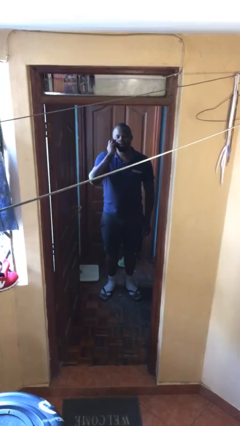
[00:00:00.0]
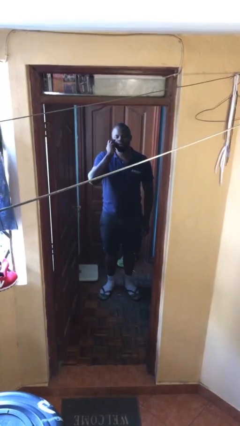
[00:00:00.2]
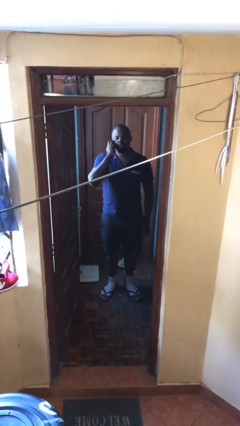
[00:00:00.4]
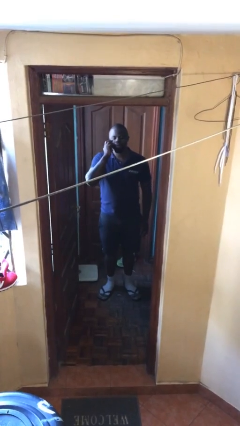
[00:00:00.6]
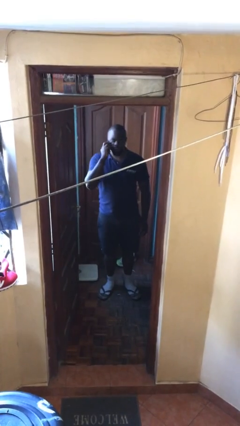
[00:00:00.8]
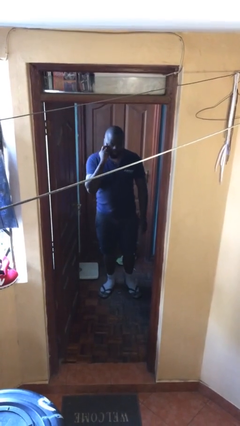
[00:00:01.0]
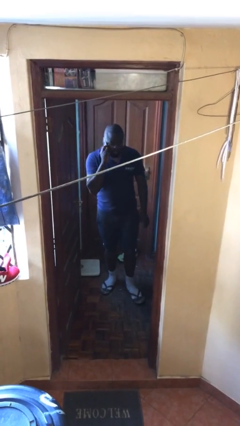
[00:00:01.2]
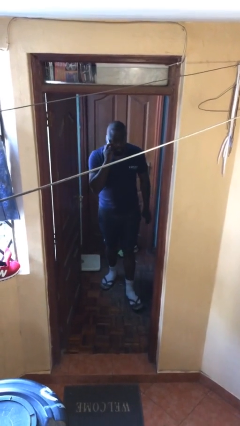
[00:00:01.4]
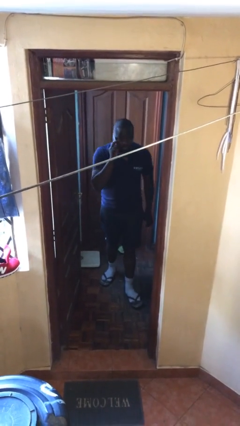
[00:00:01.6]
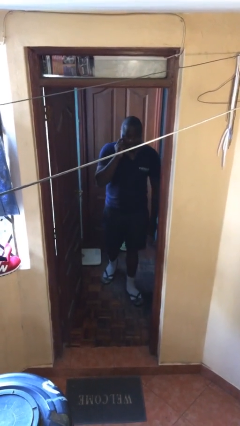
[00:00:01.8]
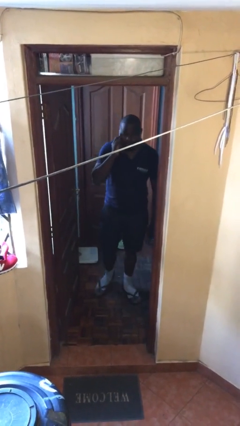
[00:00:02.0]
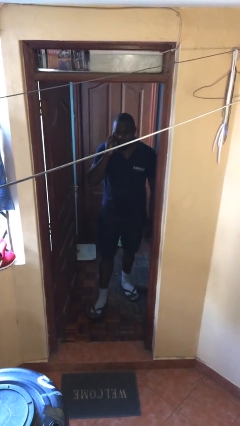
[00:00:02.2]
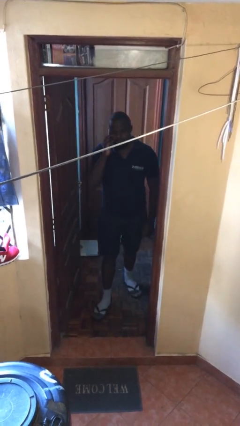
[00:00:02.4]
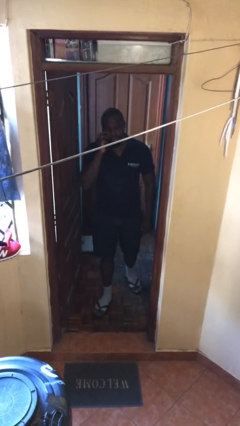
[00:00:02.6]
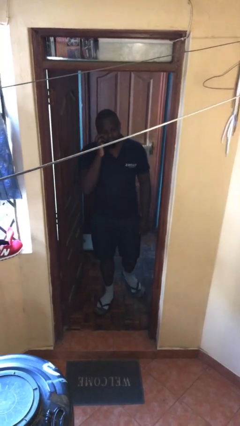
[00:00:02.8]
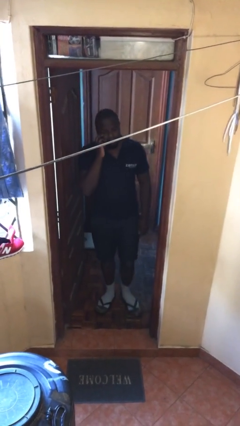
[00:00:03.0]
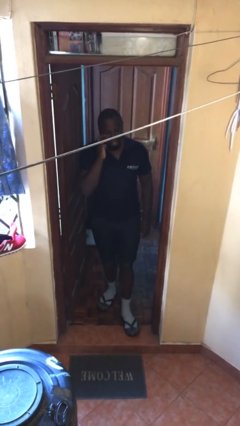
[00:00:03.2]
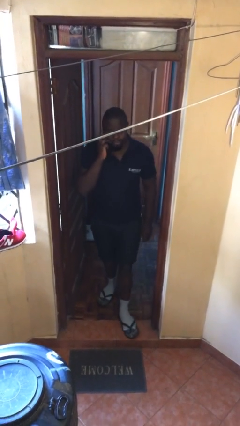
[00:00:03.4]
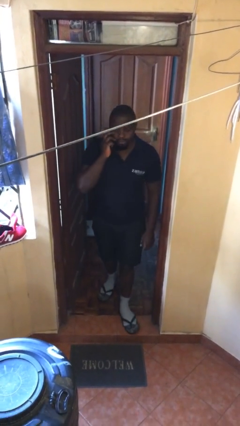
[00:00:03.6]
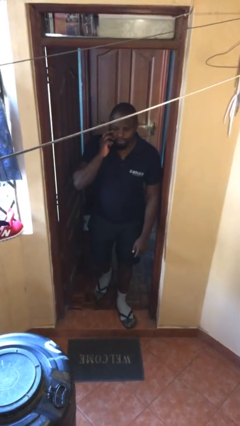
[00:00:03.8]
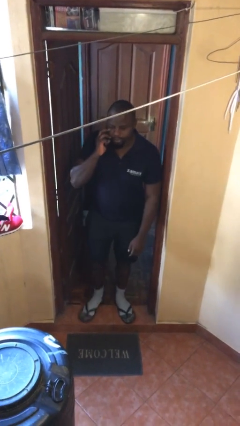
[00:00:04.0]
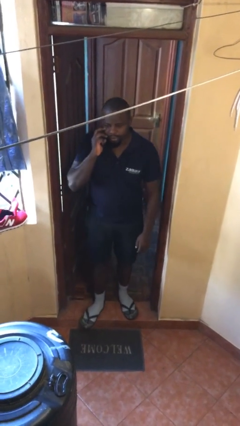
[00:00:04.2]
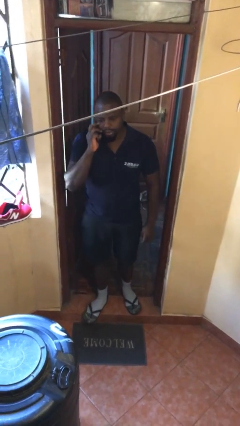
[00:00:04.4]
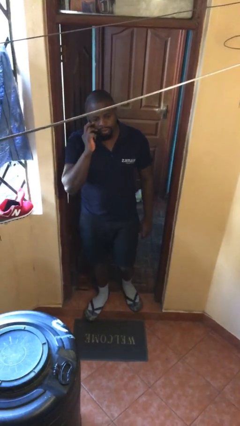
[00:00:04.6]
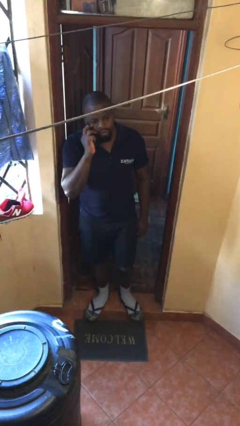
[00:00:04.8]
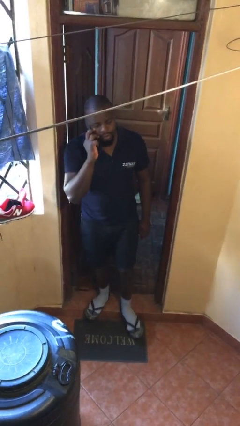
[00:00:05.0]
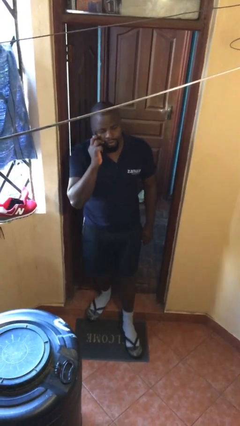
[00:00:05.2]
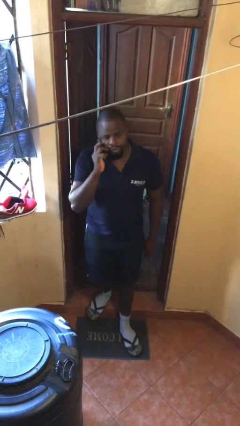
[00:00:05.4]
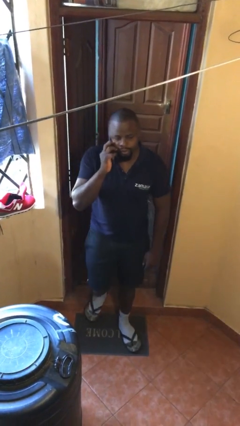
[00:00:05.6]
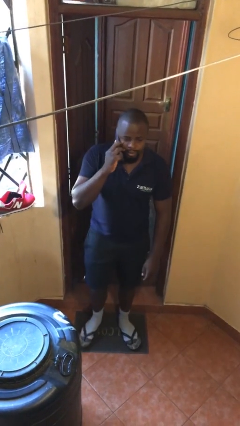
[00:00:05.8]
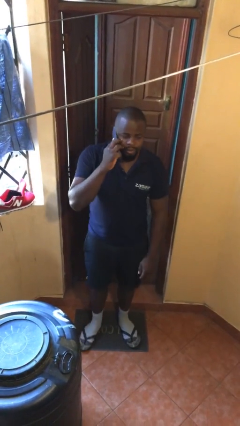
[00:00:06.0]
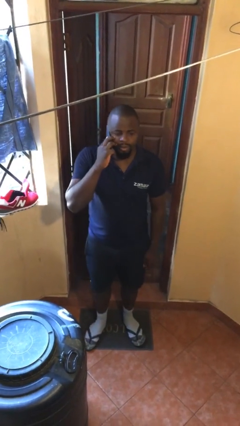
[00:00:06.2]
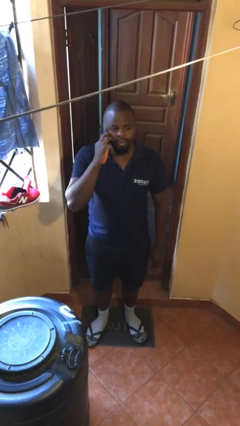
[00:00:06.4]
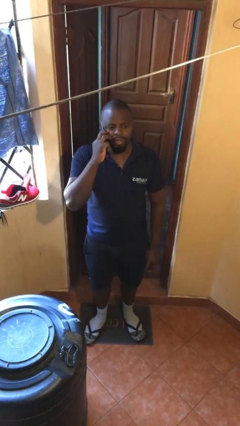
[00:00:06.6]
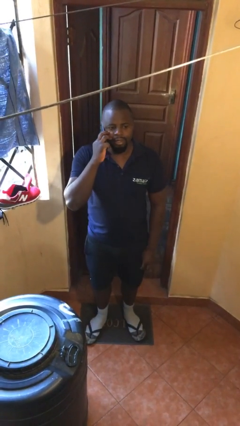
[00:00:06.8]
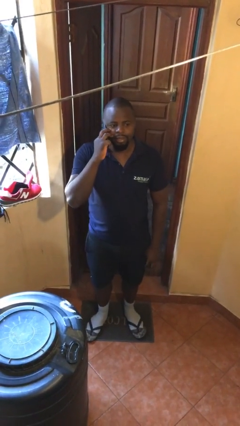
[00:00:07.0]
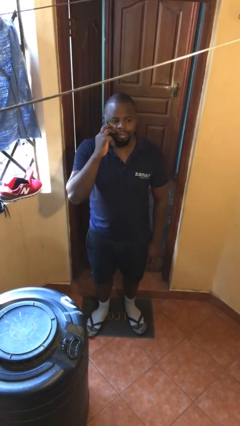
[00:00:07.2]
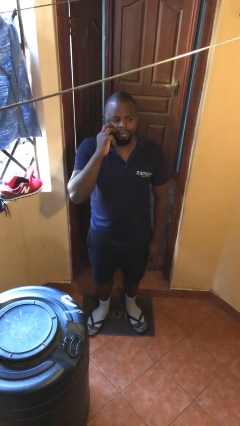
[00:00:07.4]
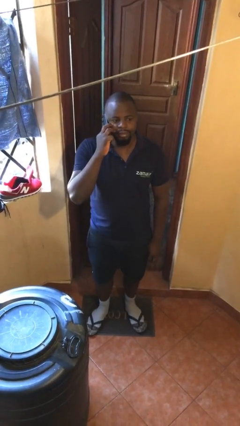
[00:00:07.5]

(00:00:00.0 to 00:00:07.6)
person enters scene through structure

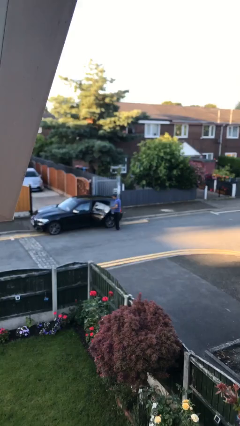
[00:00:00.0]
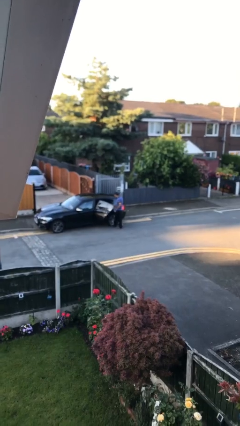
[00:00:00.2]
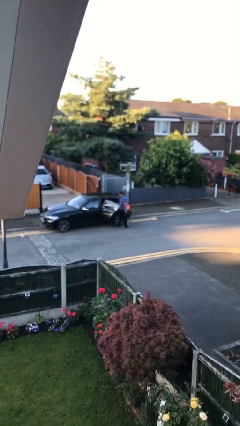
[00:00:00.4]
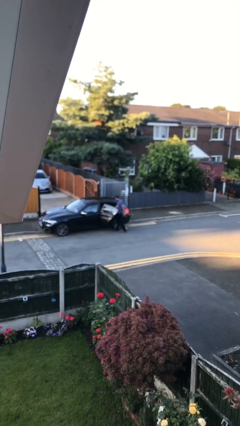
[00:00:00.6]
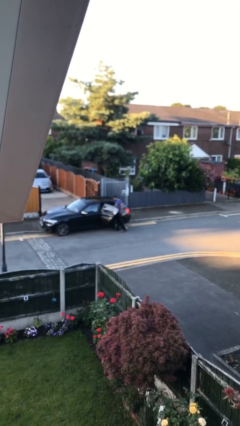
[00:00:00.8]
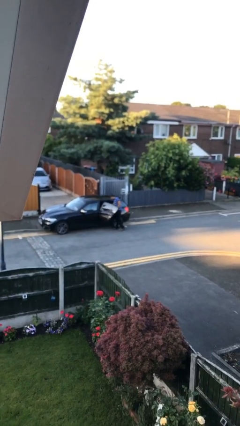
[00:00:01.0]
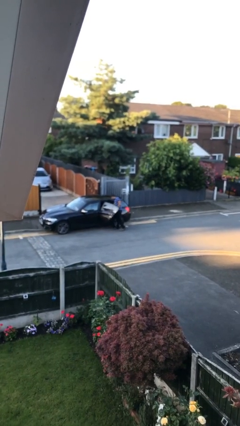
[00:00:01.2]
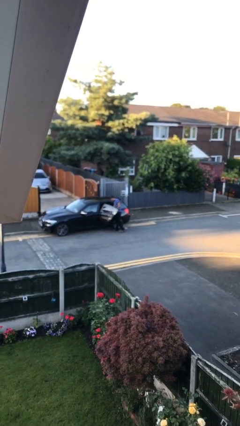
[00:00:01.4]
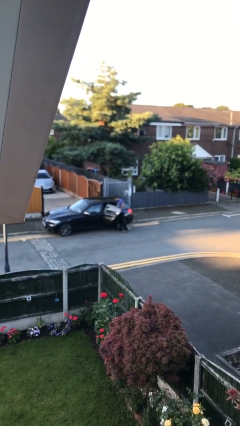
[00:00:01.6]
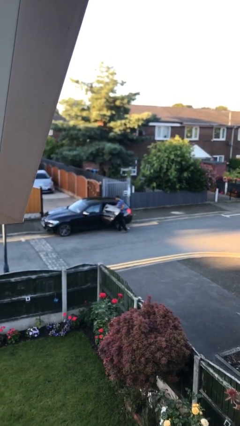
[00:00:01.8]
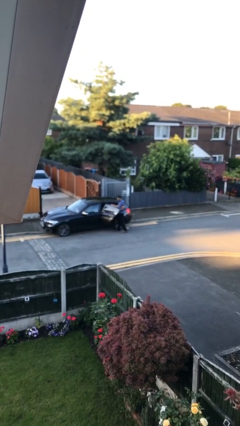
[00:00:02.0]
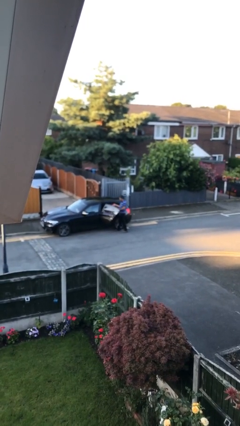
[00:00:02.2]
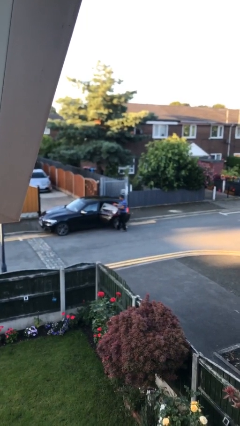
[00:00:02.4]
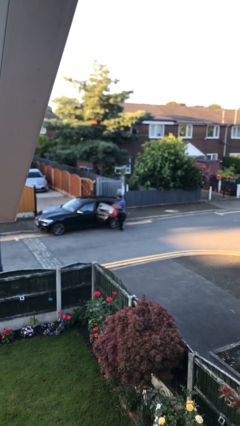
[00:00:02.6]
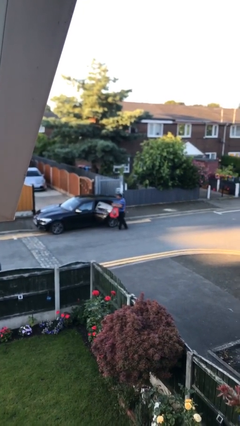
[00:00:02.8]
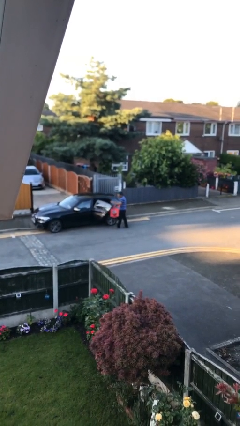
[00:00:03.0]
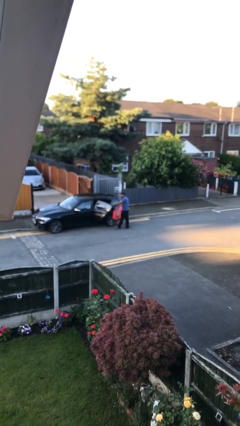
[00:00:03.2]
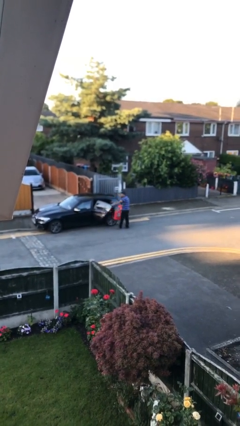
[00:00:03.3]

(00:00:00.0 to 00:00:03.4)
person unloads car

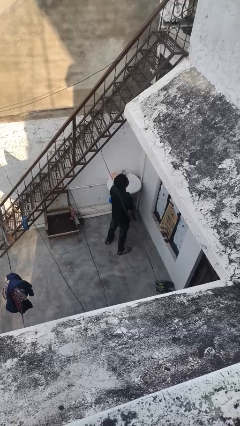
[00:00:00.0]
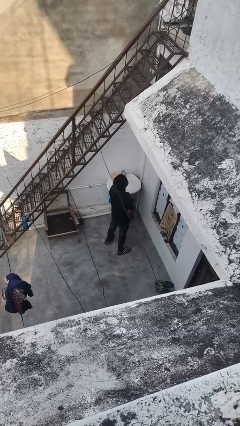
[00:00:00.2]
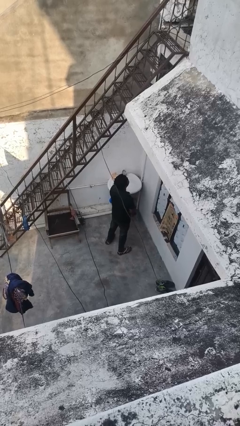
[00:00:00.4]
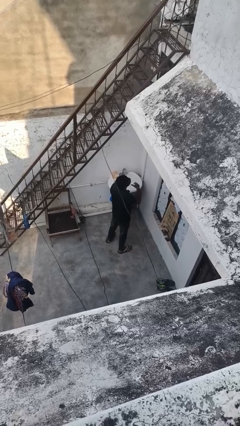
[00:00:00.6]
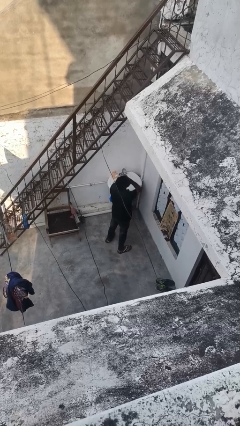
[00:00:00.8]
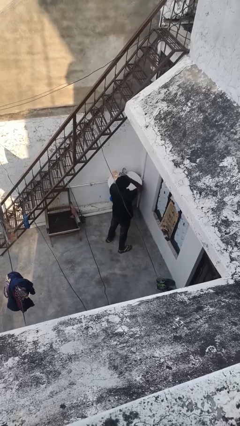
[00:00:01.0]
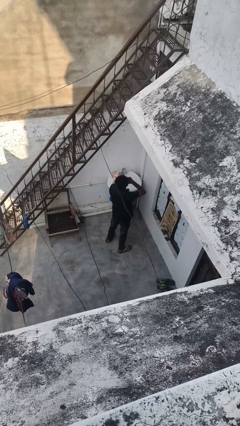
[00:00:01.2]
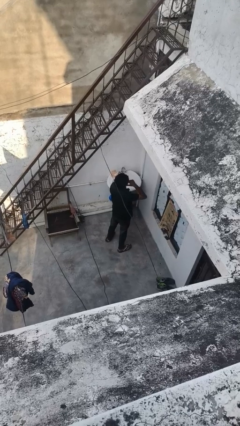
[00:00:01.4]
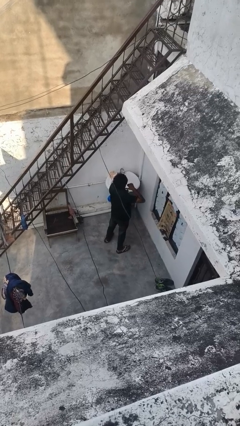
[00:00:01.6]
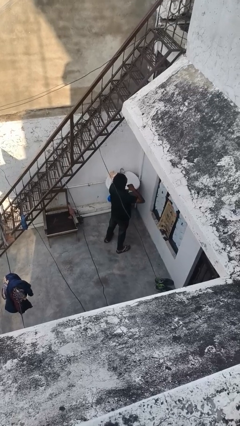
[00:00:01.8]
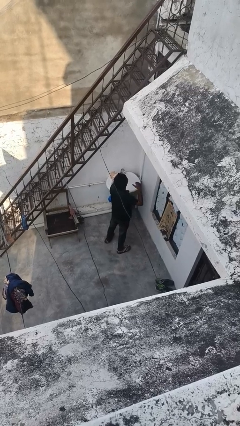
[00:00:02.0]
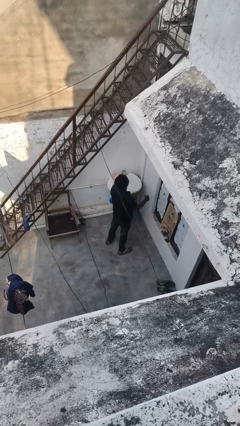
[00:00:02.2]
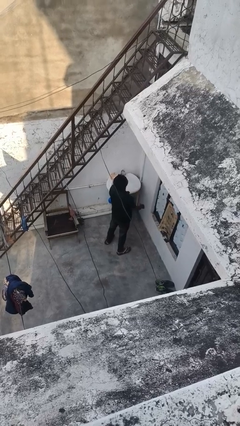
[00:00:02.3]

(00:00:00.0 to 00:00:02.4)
person gestures cut

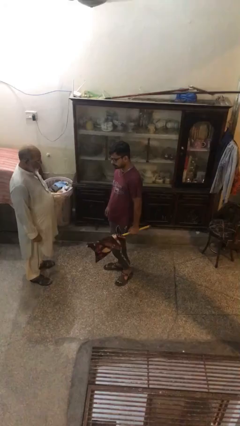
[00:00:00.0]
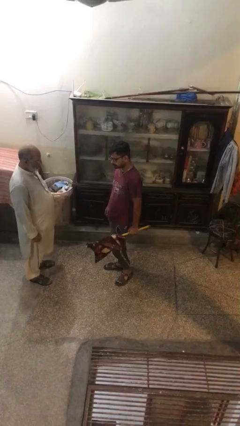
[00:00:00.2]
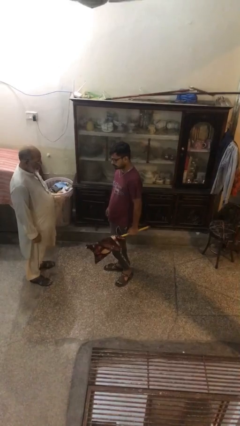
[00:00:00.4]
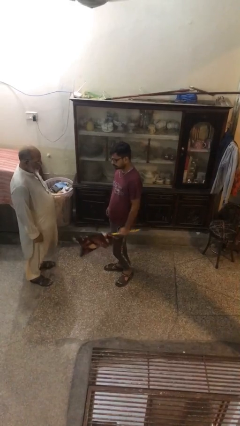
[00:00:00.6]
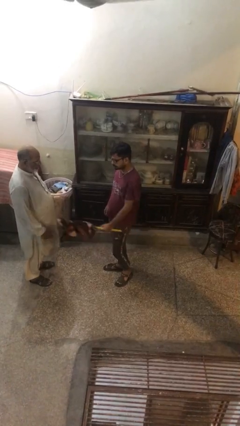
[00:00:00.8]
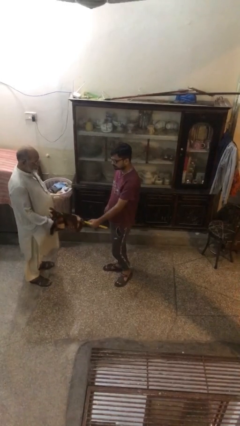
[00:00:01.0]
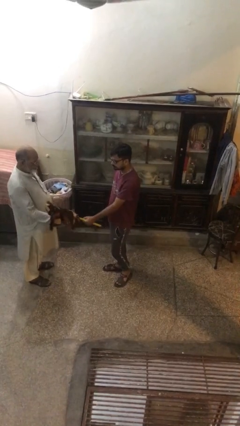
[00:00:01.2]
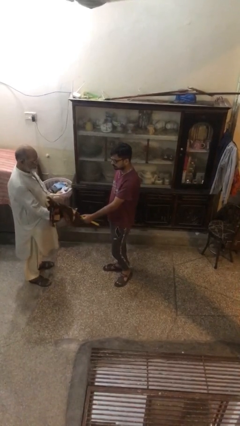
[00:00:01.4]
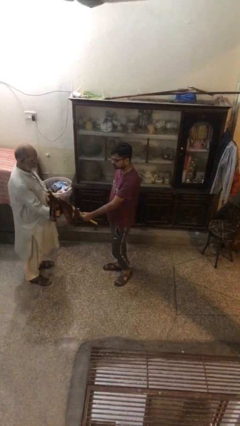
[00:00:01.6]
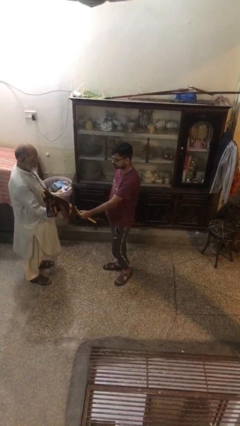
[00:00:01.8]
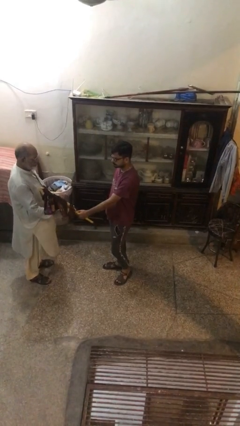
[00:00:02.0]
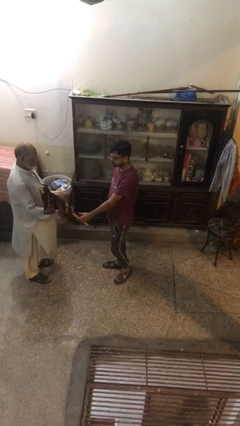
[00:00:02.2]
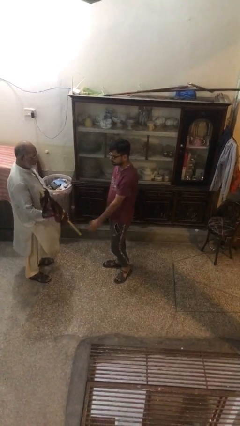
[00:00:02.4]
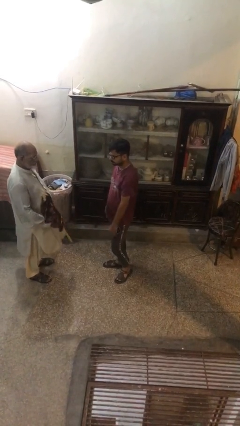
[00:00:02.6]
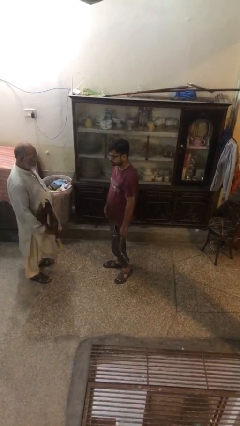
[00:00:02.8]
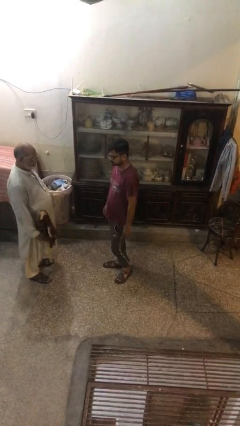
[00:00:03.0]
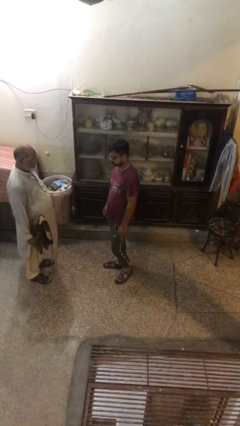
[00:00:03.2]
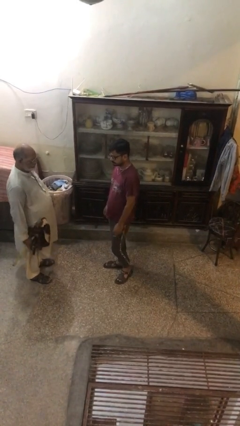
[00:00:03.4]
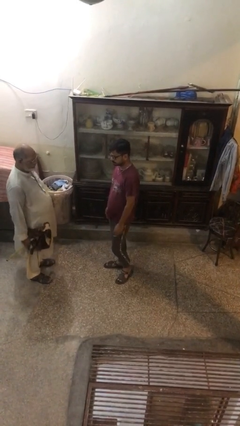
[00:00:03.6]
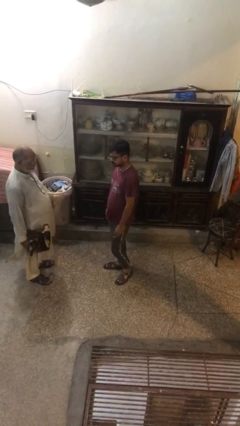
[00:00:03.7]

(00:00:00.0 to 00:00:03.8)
person transfers object to person
